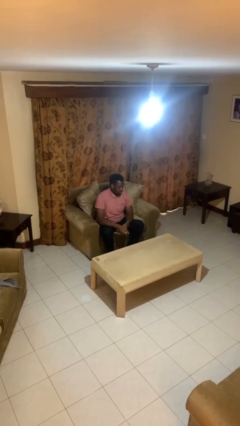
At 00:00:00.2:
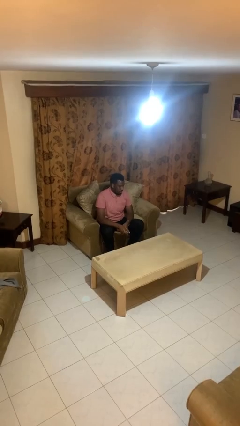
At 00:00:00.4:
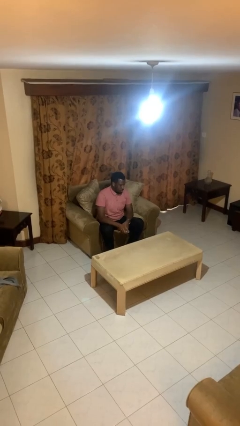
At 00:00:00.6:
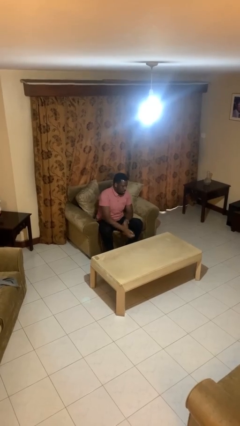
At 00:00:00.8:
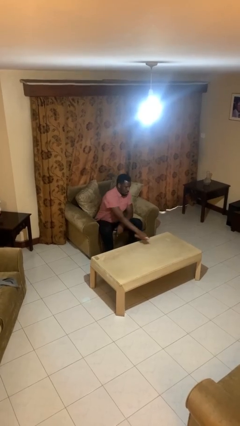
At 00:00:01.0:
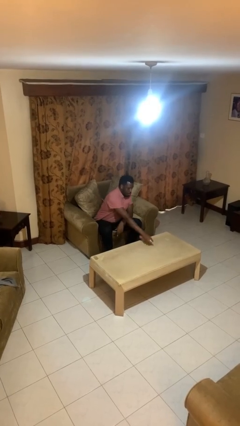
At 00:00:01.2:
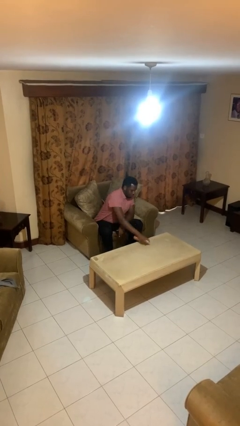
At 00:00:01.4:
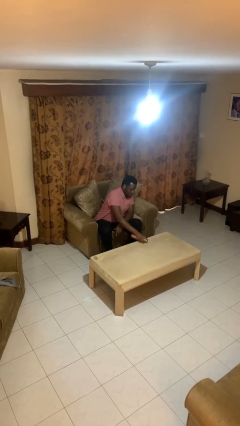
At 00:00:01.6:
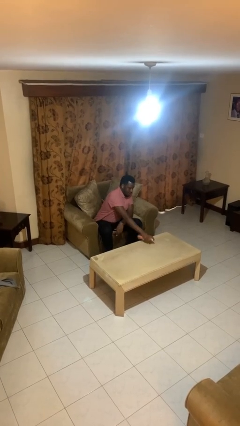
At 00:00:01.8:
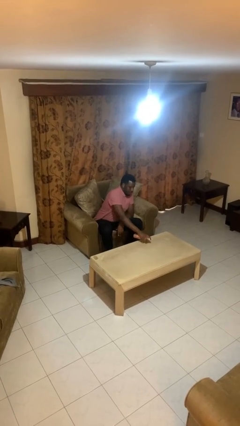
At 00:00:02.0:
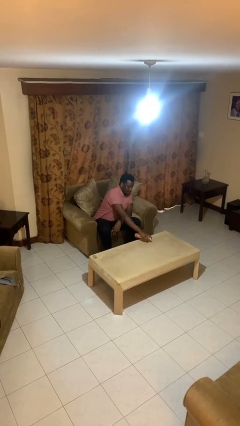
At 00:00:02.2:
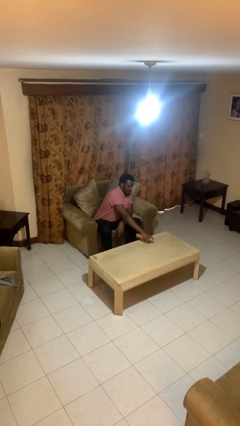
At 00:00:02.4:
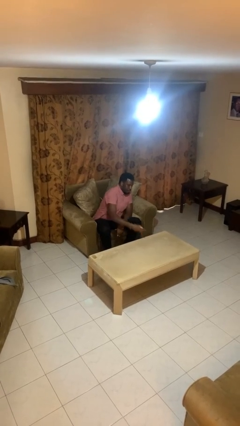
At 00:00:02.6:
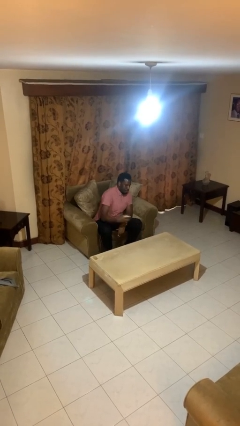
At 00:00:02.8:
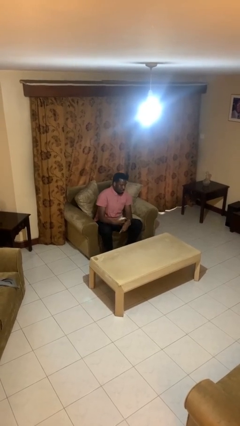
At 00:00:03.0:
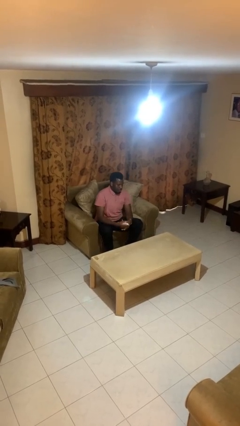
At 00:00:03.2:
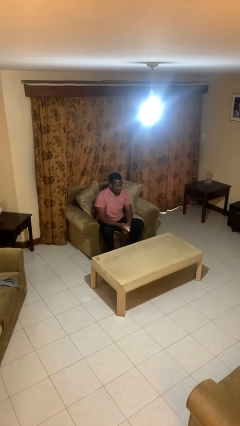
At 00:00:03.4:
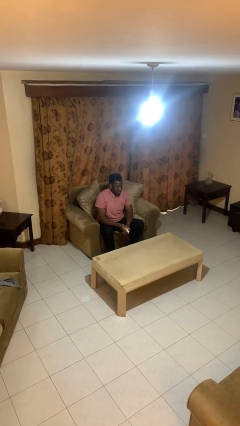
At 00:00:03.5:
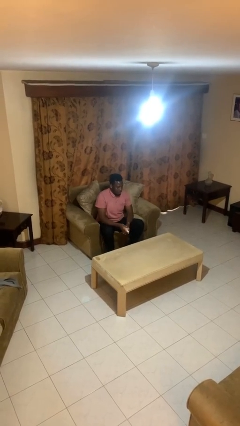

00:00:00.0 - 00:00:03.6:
person sprays from bottle

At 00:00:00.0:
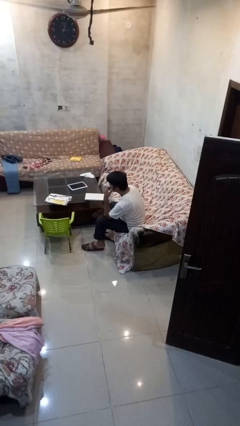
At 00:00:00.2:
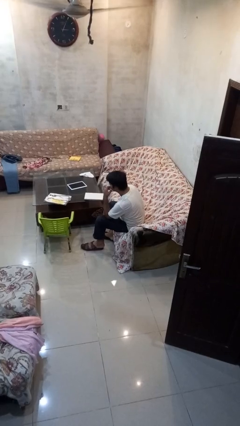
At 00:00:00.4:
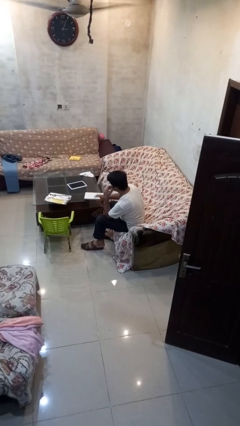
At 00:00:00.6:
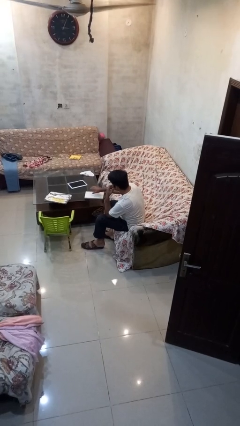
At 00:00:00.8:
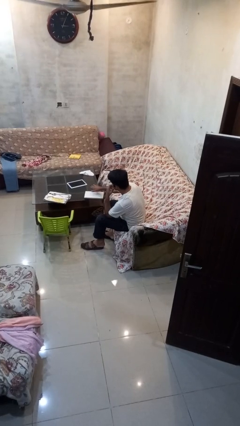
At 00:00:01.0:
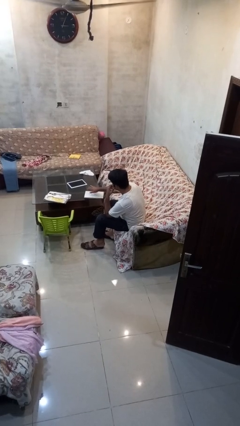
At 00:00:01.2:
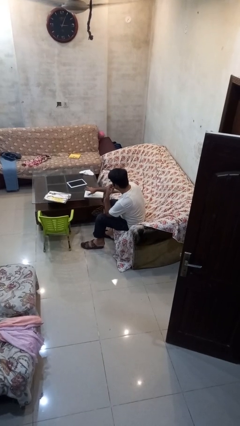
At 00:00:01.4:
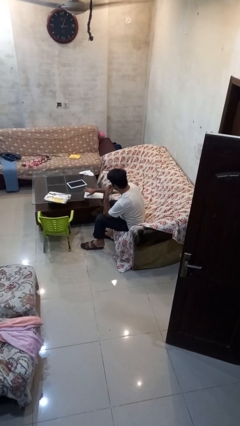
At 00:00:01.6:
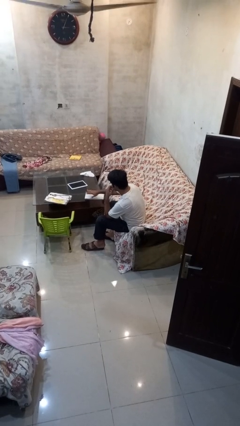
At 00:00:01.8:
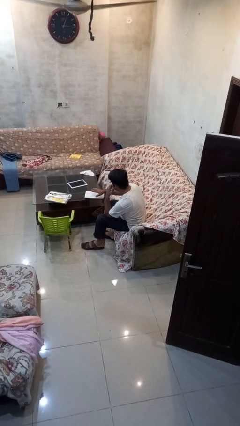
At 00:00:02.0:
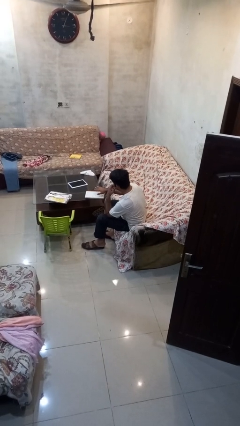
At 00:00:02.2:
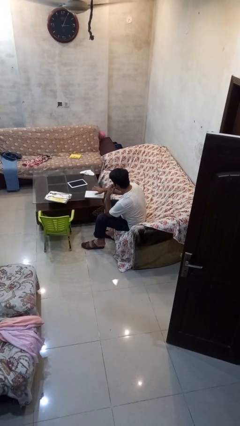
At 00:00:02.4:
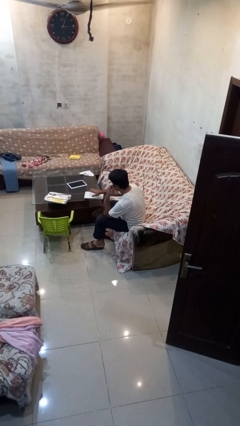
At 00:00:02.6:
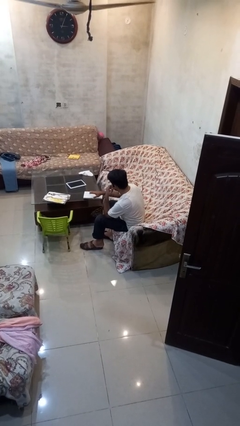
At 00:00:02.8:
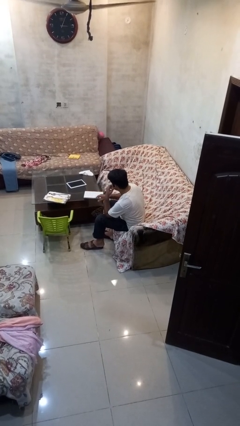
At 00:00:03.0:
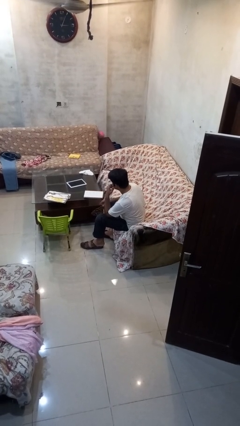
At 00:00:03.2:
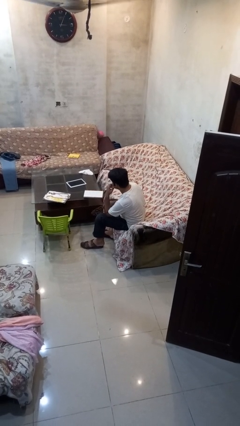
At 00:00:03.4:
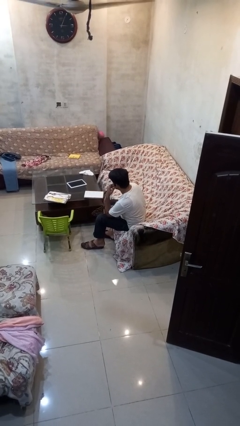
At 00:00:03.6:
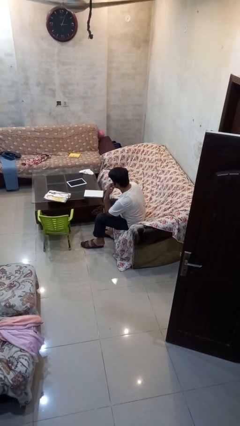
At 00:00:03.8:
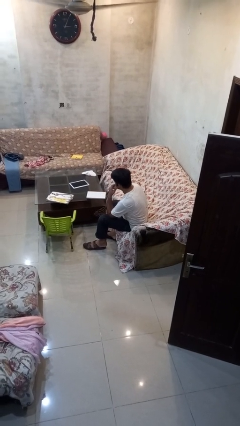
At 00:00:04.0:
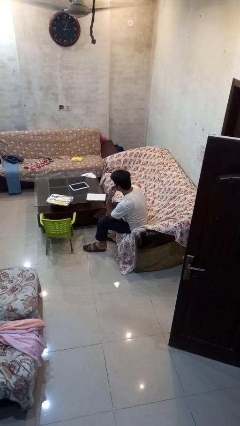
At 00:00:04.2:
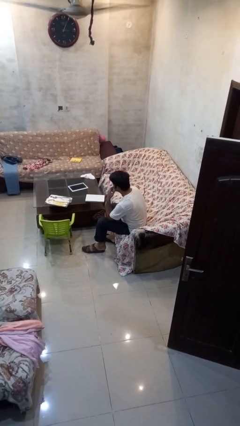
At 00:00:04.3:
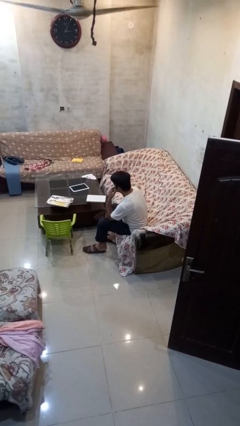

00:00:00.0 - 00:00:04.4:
person waves hand over object

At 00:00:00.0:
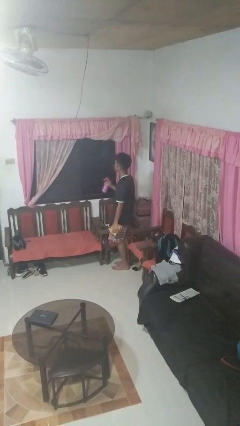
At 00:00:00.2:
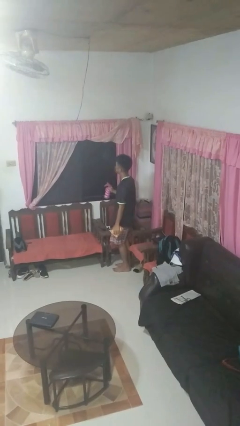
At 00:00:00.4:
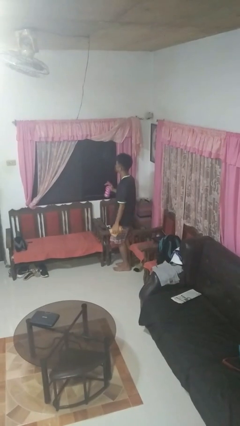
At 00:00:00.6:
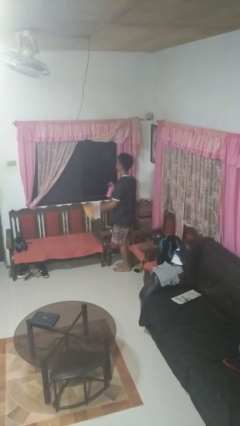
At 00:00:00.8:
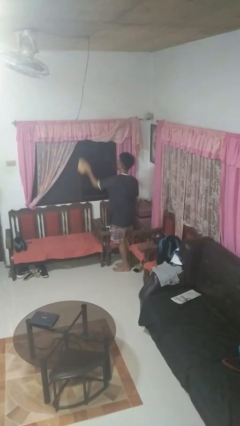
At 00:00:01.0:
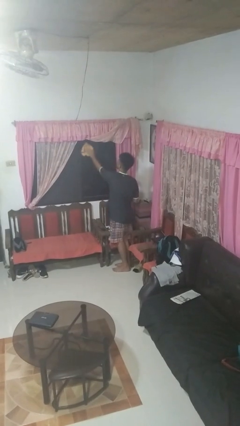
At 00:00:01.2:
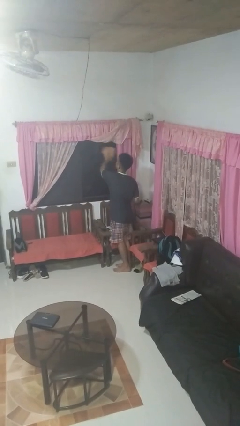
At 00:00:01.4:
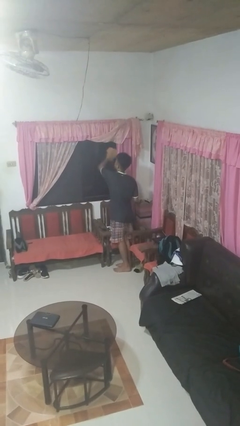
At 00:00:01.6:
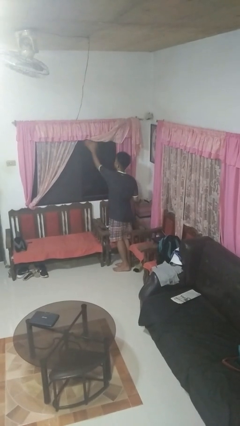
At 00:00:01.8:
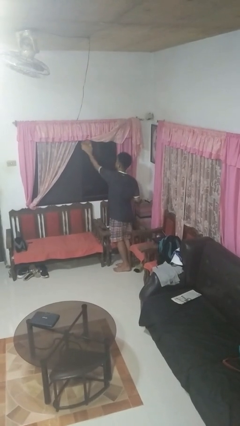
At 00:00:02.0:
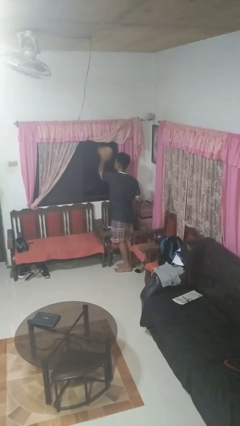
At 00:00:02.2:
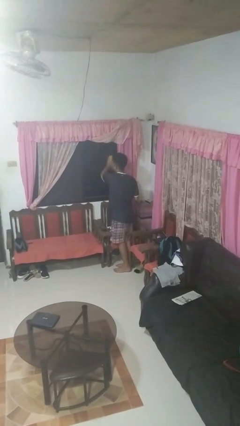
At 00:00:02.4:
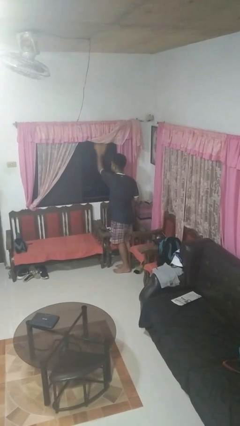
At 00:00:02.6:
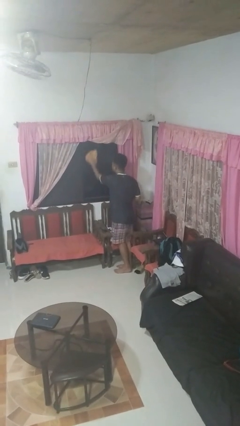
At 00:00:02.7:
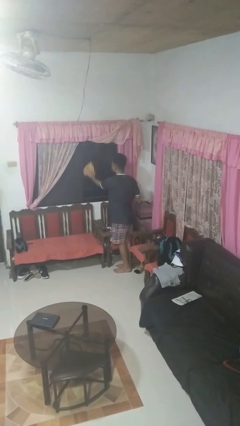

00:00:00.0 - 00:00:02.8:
person washes window

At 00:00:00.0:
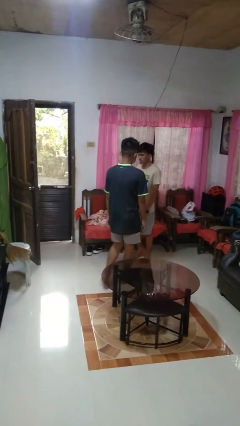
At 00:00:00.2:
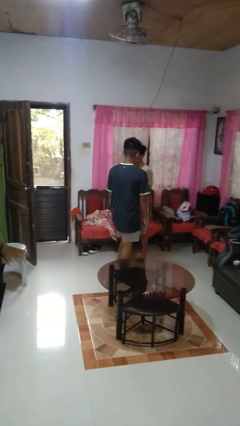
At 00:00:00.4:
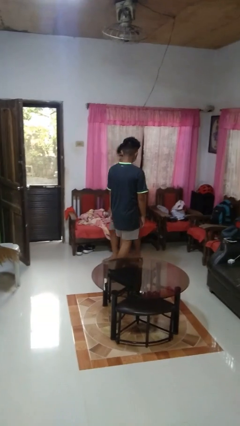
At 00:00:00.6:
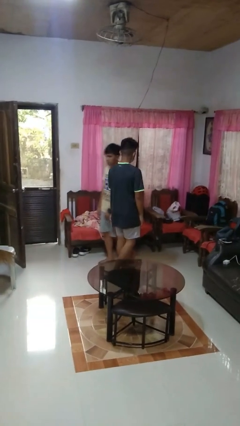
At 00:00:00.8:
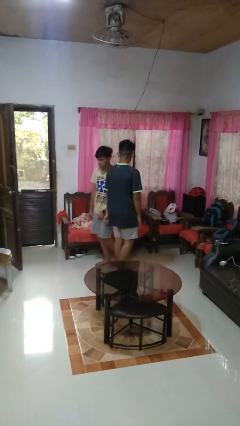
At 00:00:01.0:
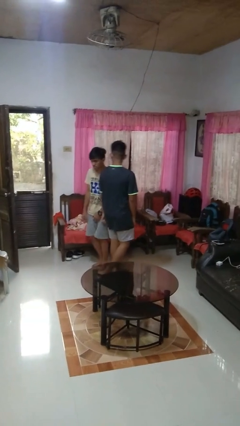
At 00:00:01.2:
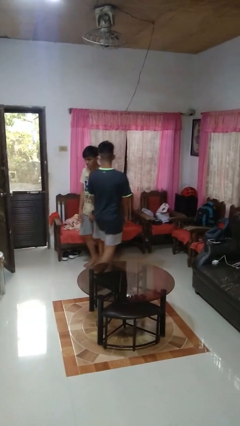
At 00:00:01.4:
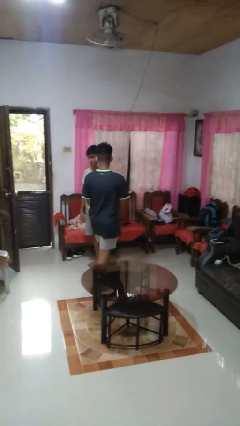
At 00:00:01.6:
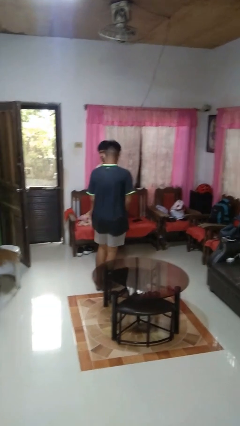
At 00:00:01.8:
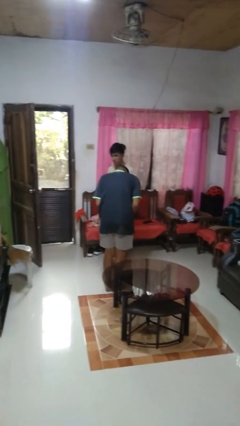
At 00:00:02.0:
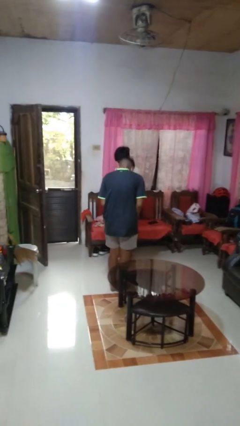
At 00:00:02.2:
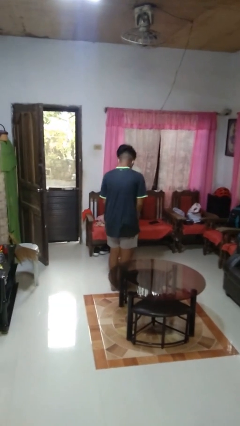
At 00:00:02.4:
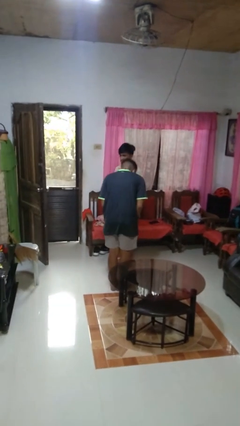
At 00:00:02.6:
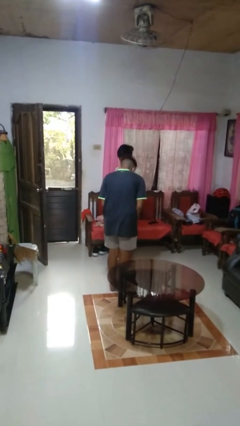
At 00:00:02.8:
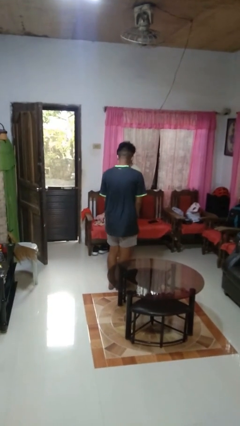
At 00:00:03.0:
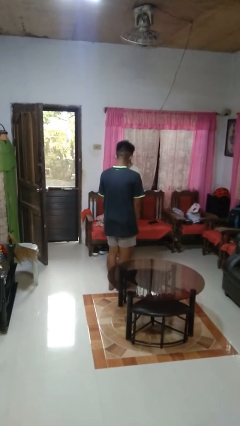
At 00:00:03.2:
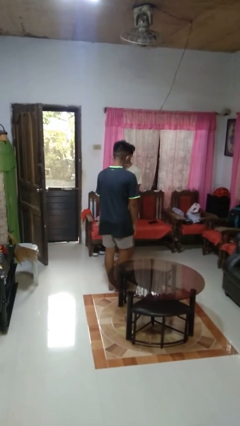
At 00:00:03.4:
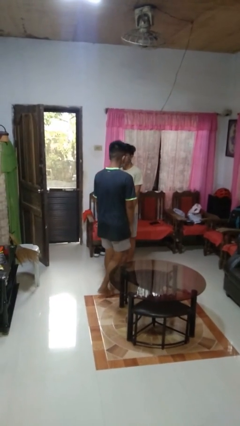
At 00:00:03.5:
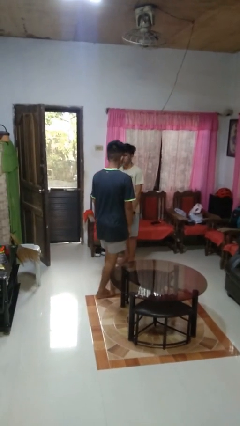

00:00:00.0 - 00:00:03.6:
person bumps into person

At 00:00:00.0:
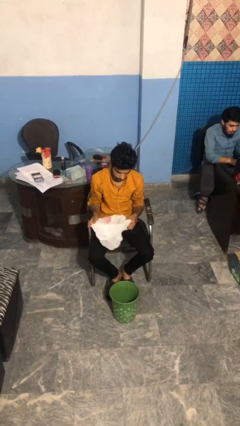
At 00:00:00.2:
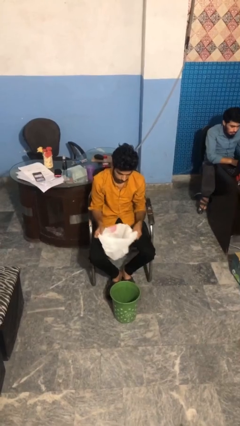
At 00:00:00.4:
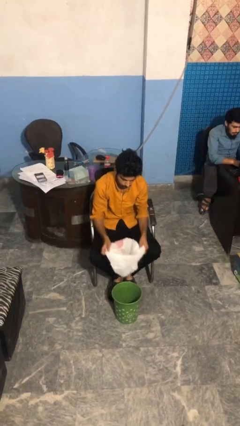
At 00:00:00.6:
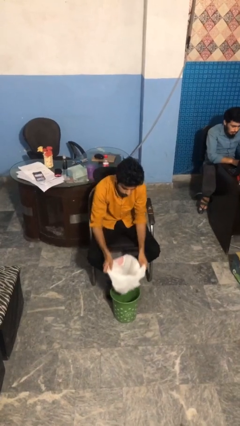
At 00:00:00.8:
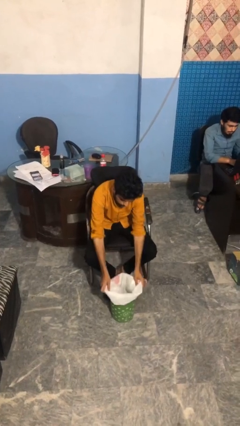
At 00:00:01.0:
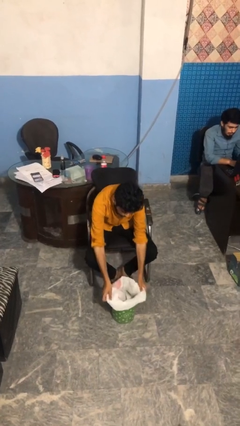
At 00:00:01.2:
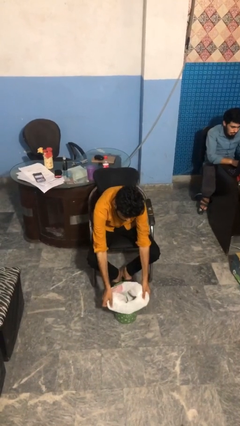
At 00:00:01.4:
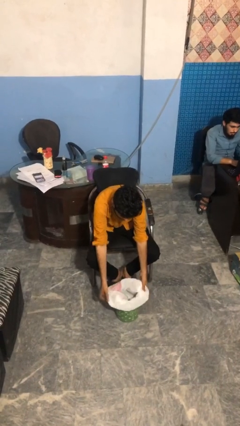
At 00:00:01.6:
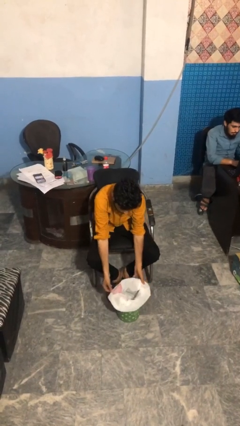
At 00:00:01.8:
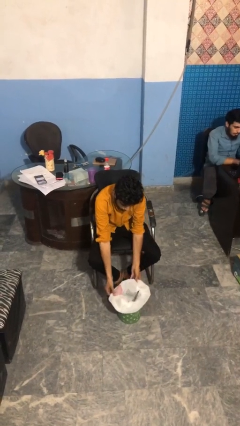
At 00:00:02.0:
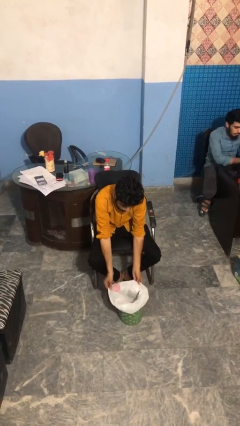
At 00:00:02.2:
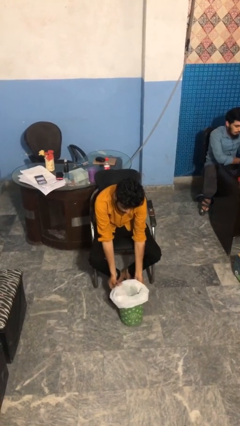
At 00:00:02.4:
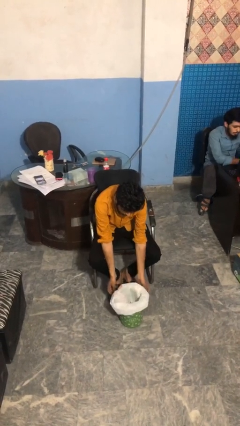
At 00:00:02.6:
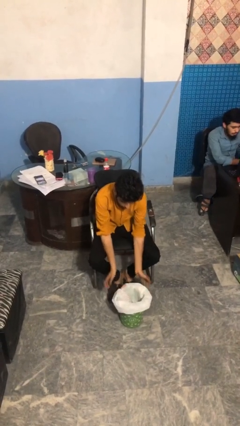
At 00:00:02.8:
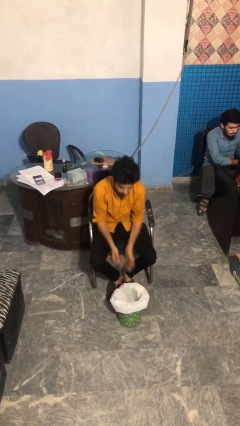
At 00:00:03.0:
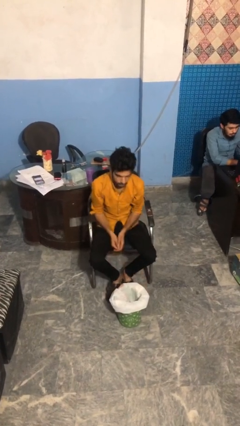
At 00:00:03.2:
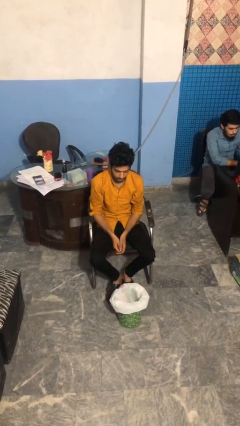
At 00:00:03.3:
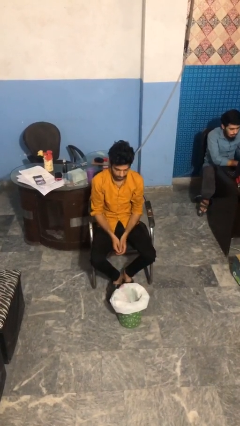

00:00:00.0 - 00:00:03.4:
person inserts trashbag into trashcan
